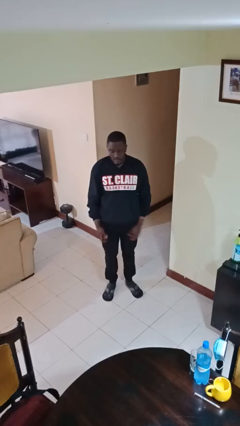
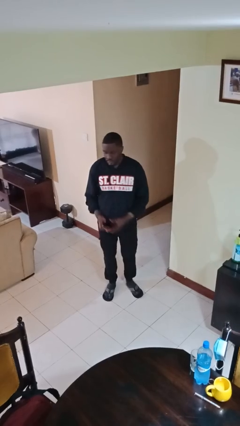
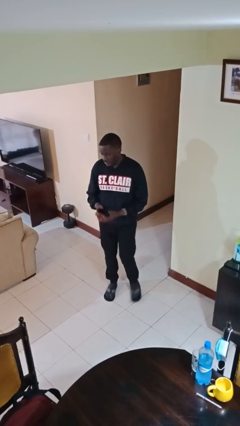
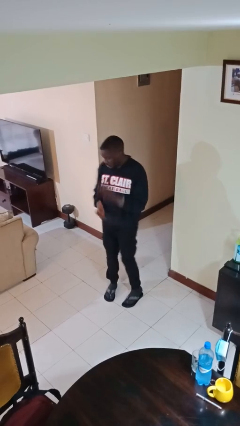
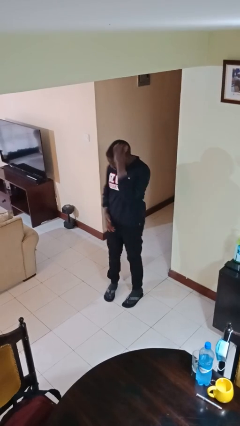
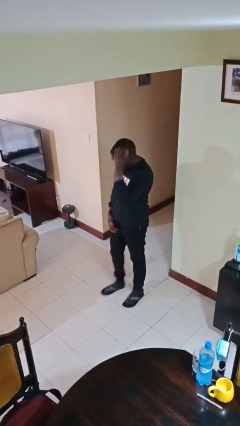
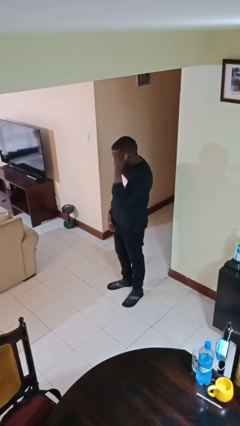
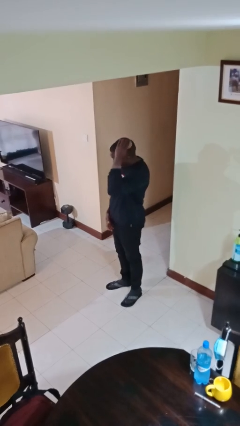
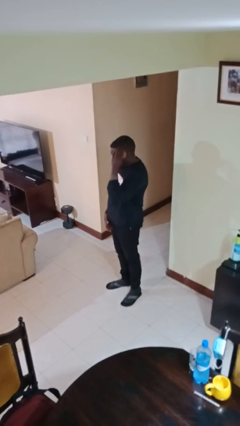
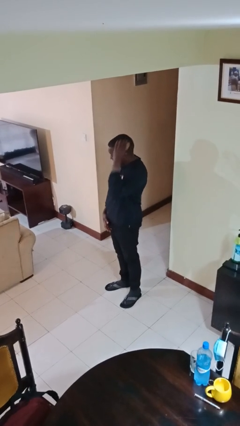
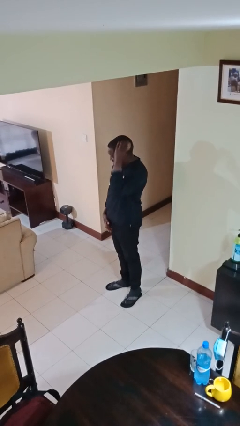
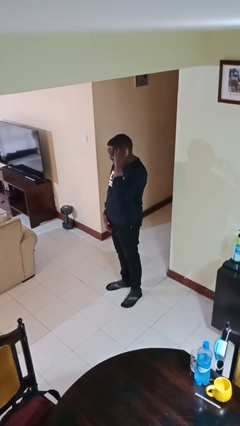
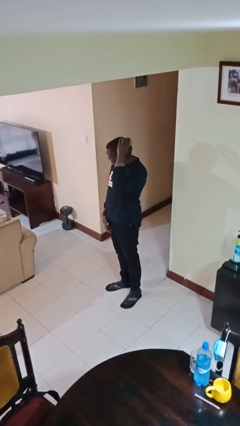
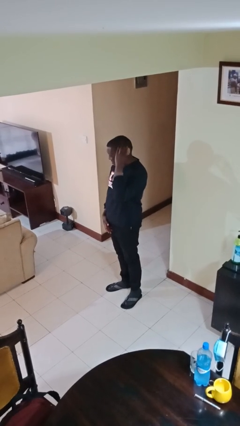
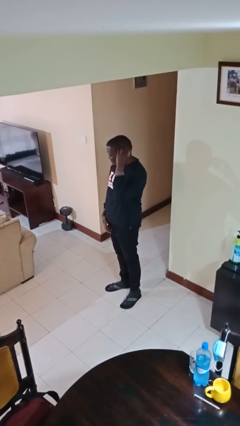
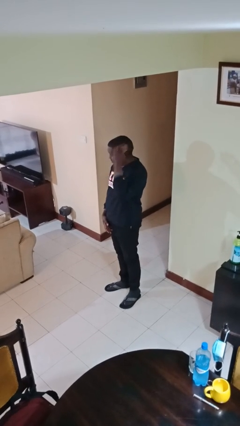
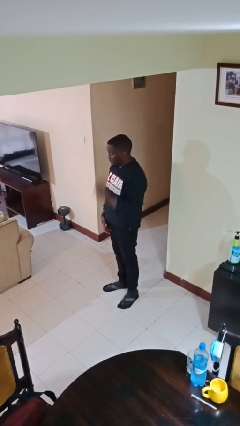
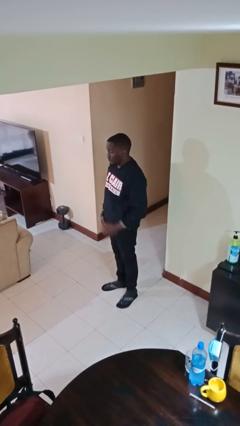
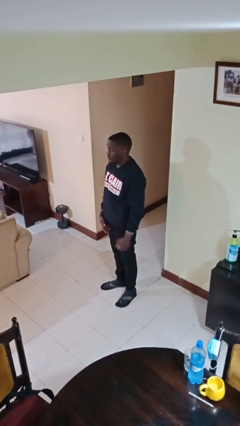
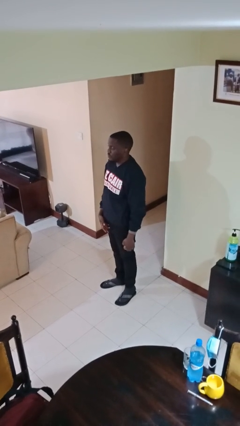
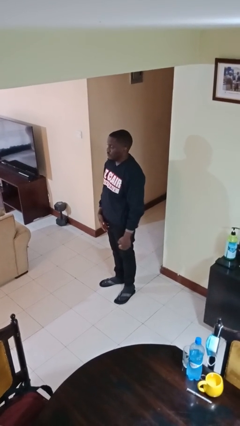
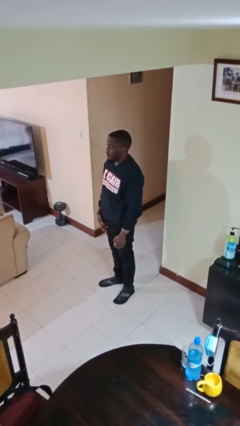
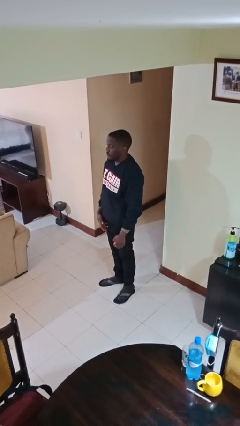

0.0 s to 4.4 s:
person brushes hair

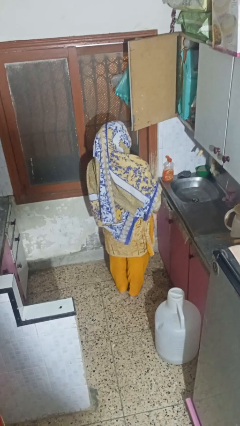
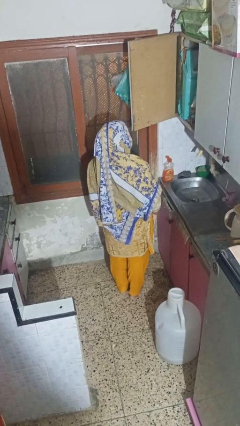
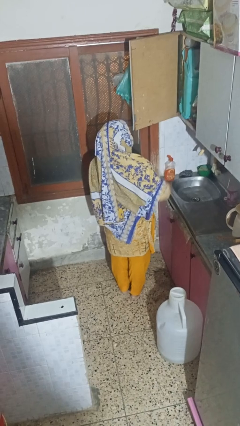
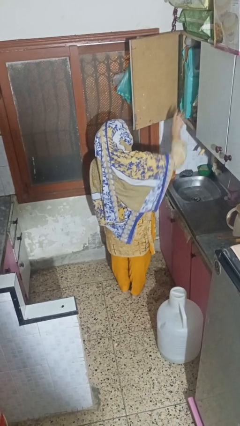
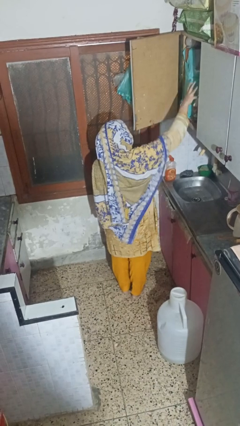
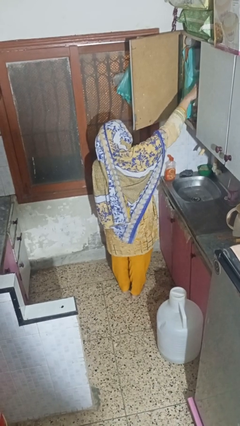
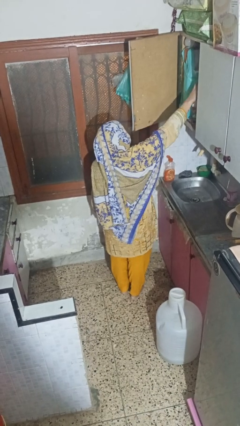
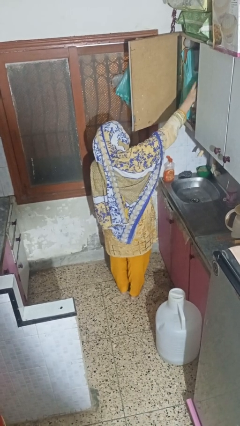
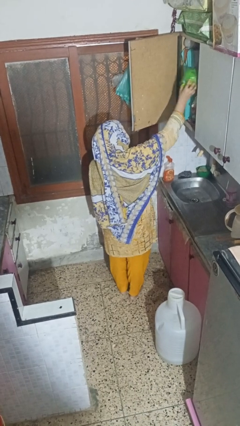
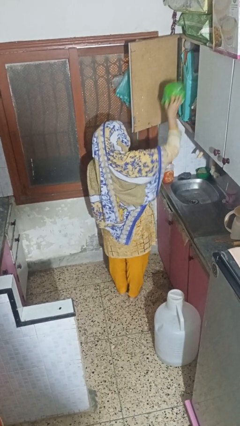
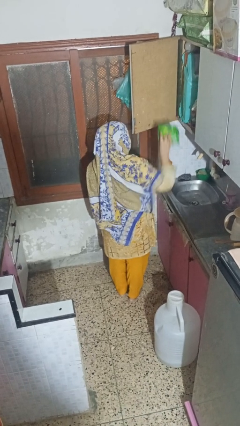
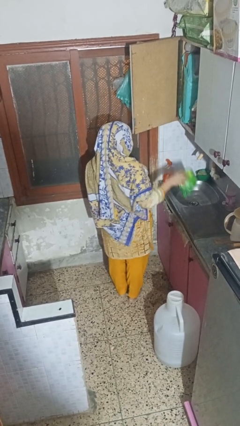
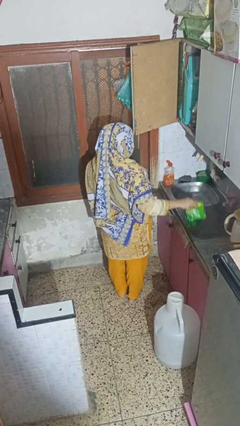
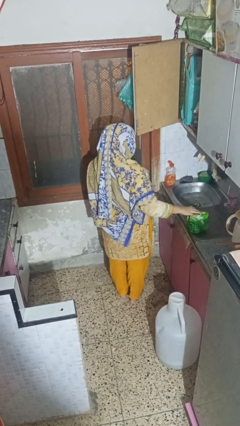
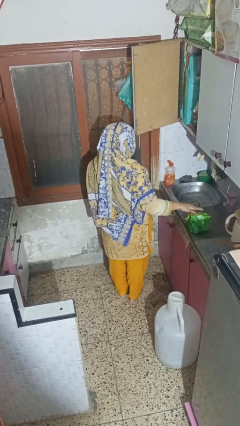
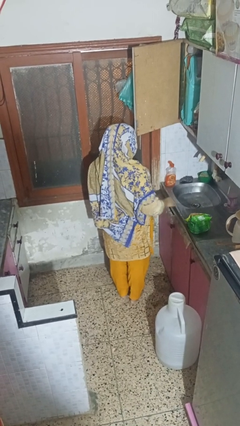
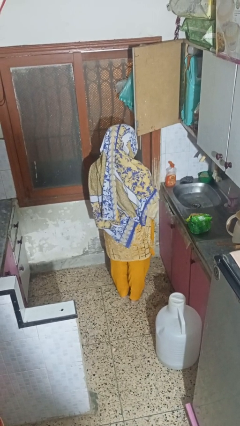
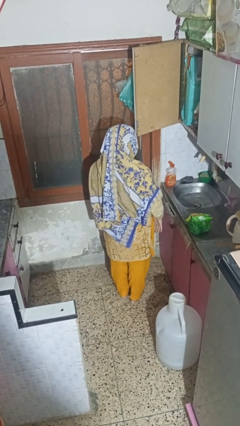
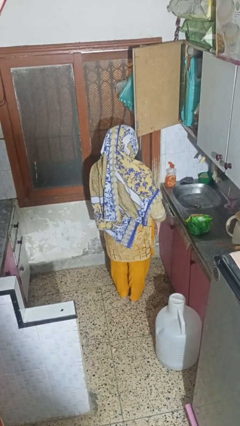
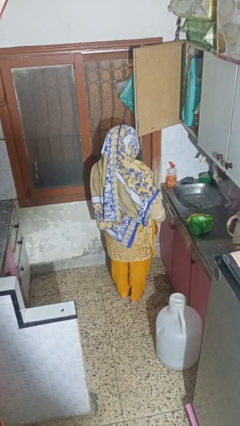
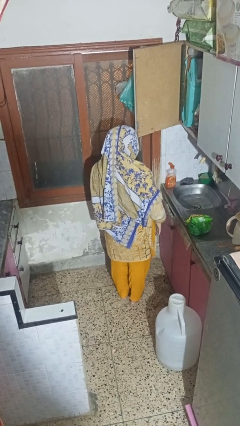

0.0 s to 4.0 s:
person takes object from cabinet

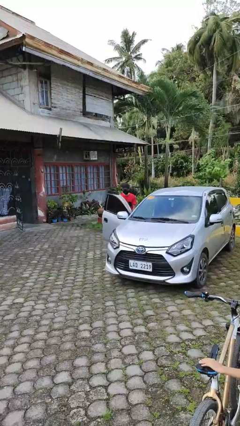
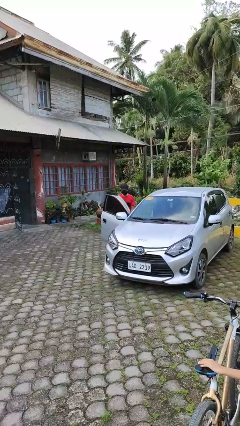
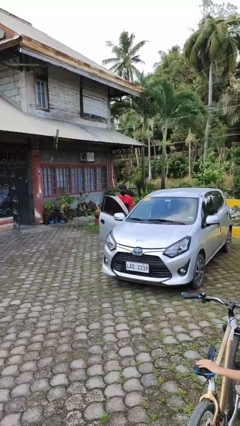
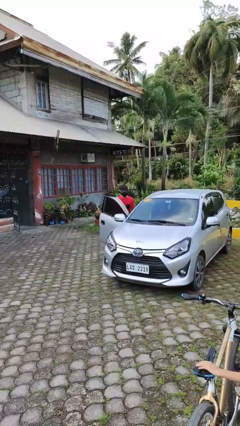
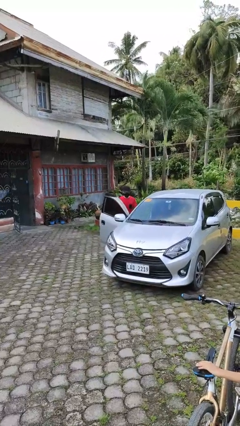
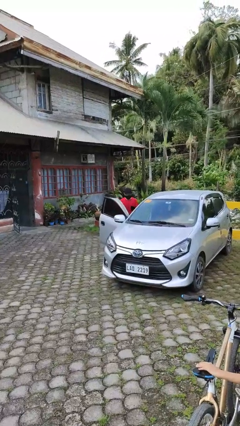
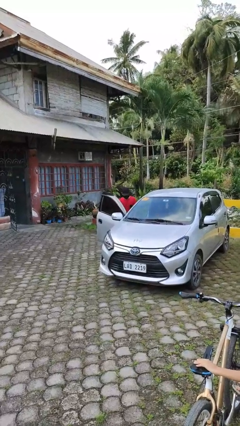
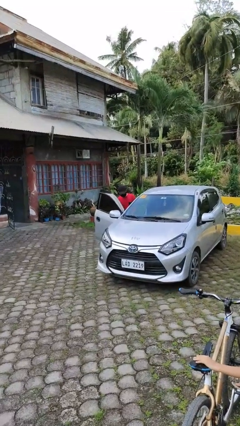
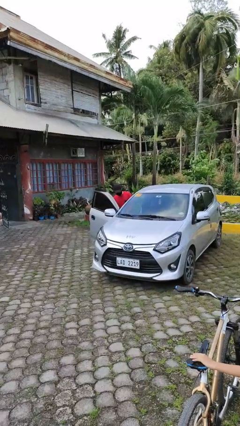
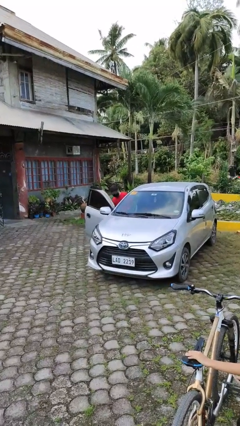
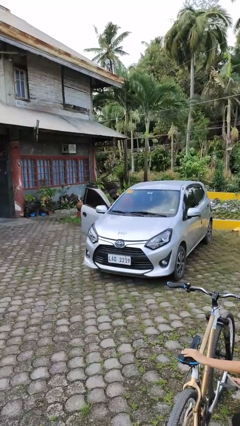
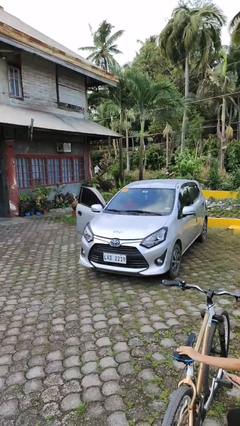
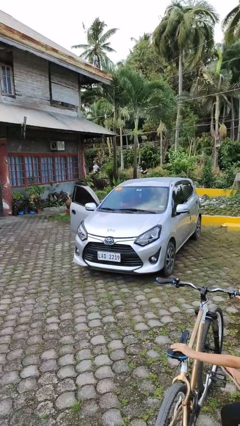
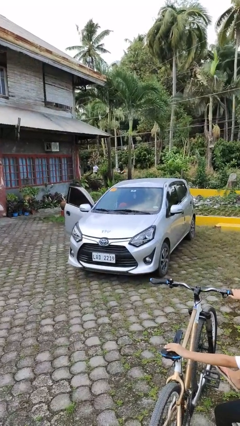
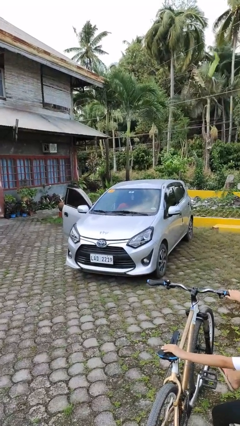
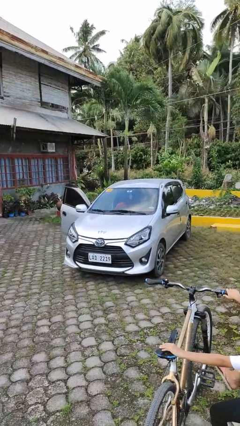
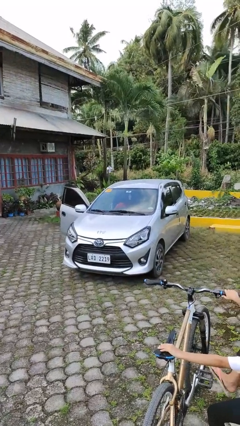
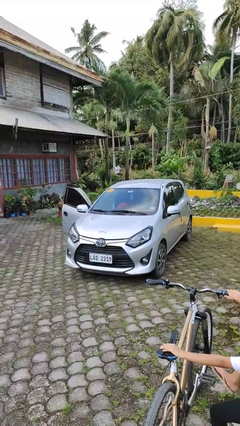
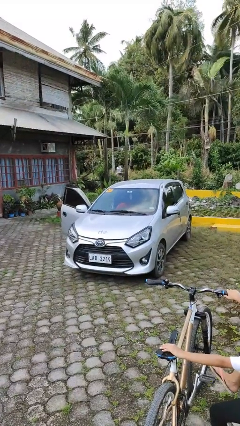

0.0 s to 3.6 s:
person enters car

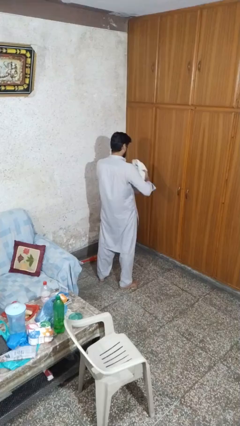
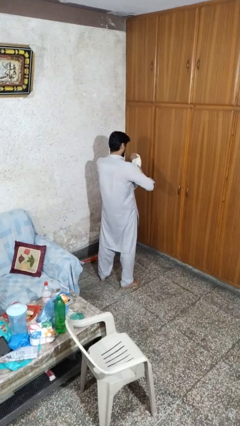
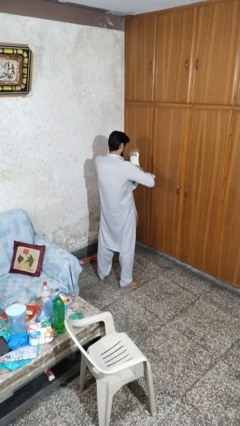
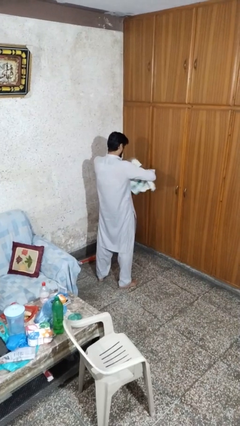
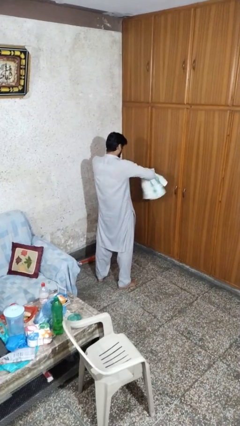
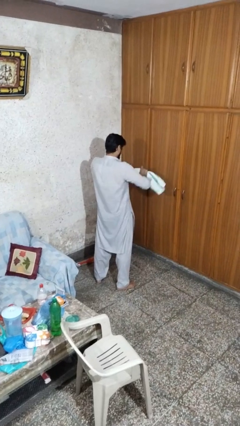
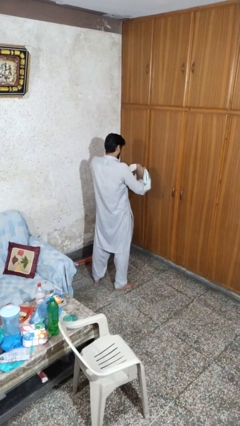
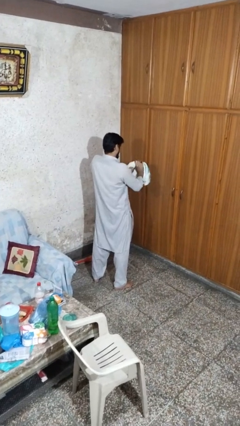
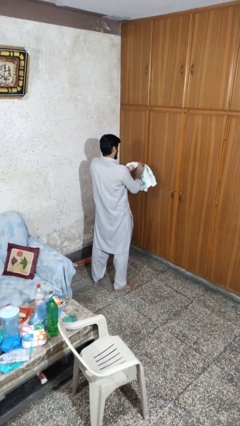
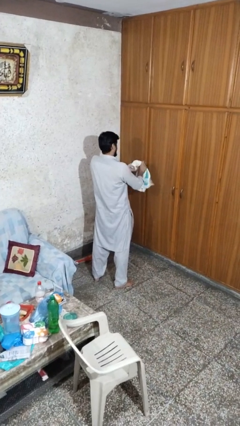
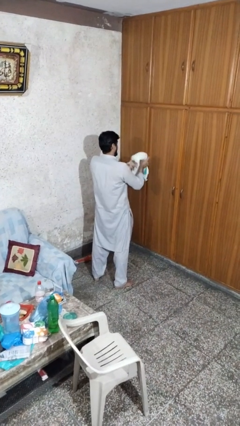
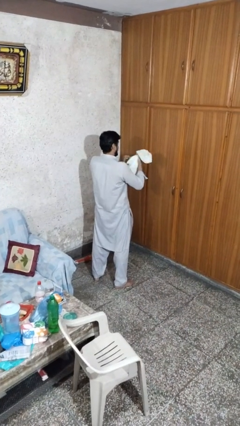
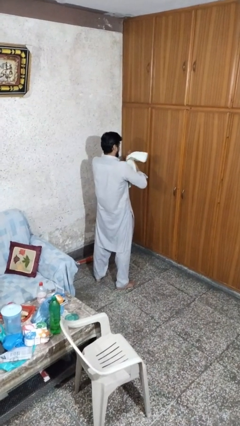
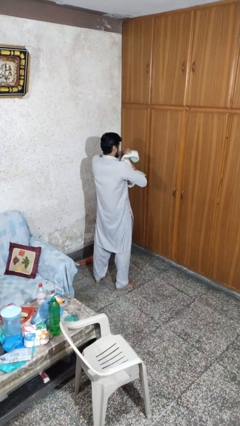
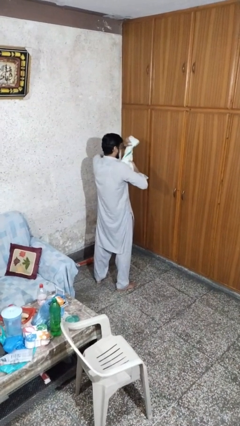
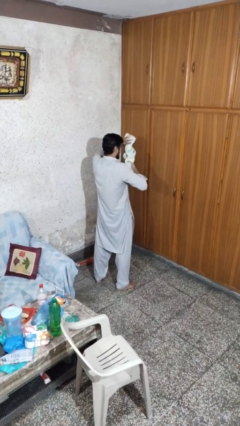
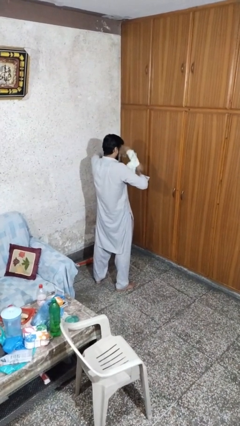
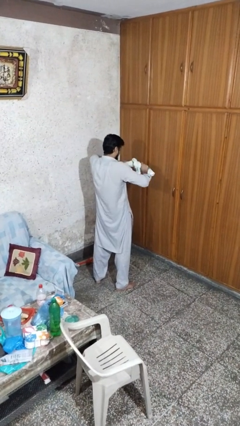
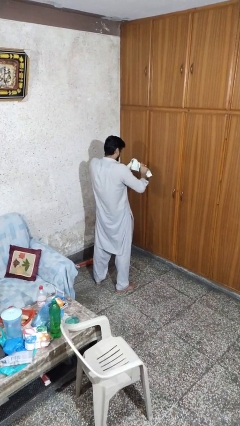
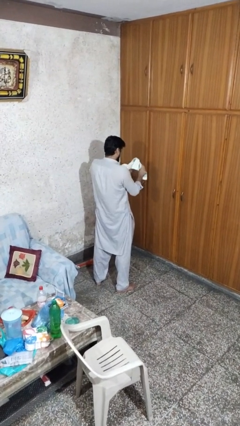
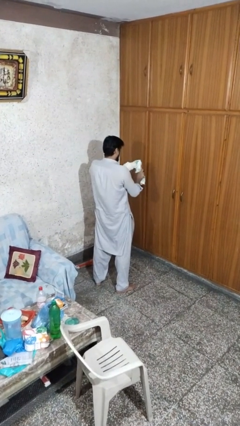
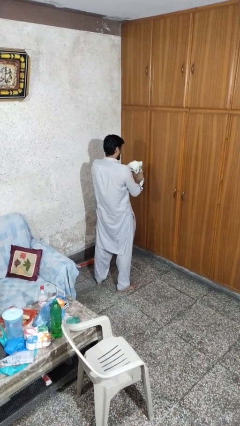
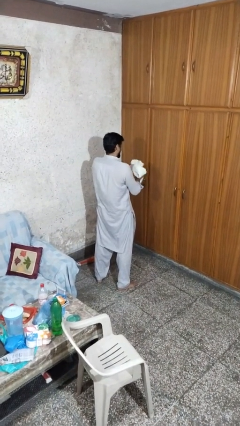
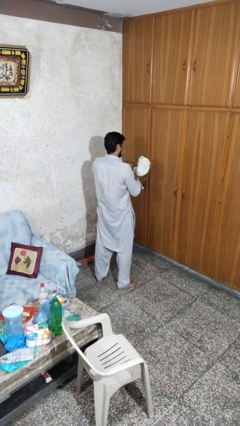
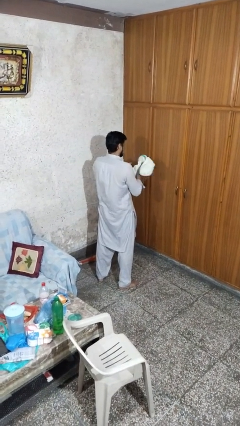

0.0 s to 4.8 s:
person squeezes object

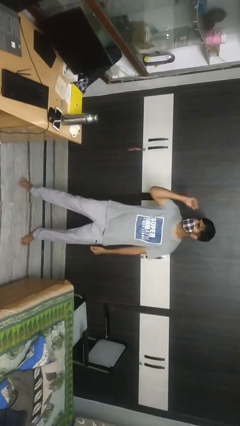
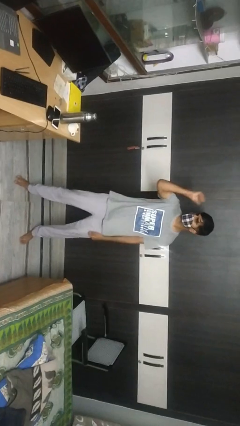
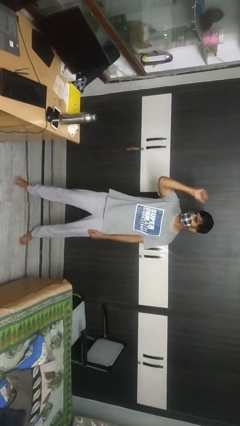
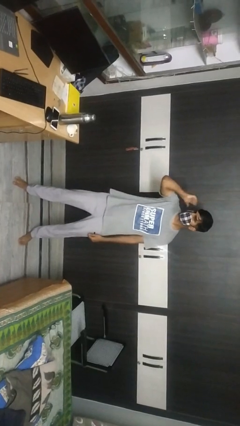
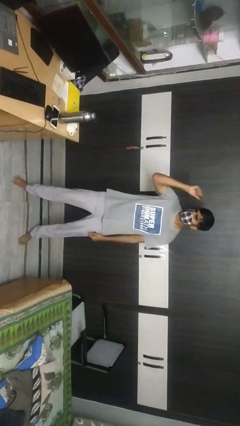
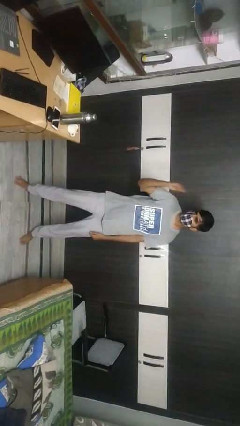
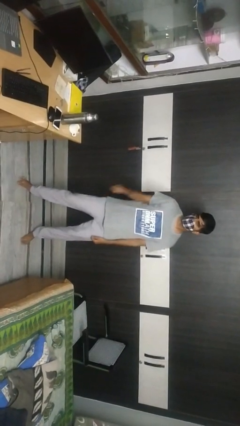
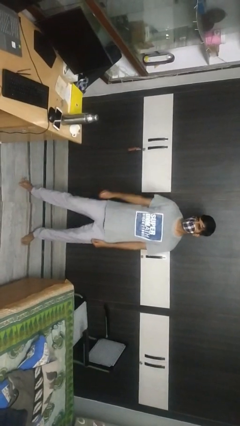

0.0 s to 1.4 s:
person gestures behind me
